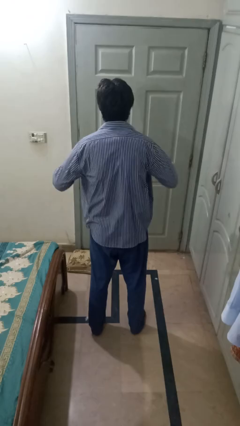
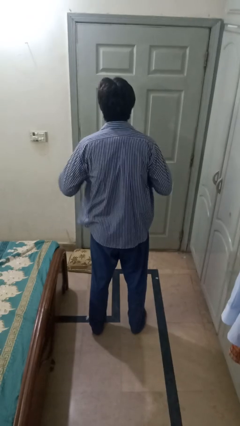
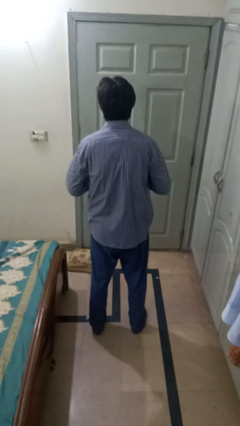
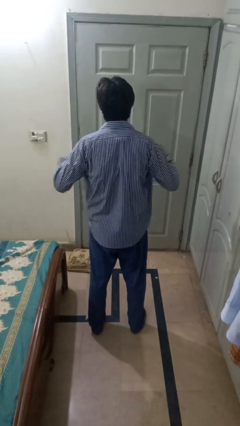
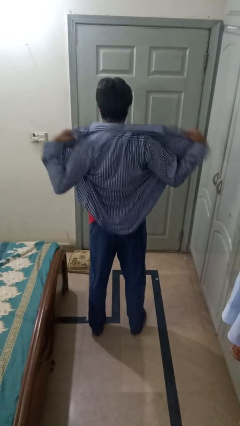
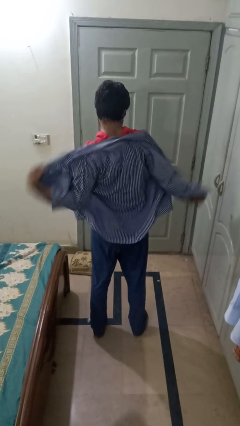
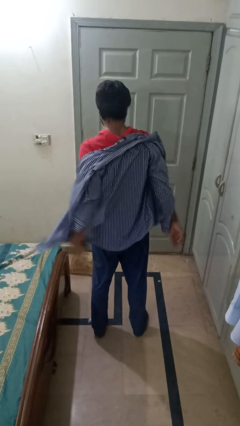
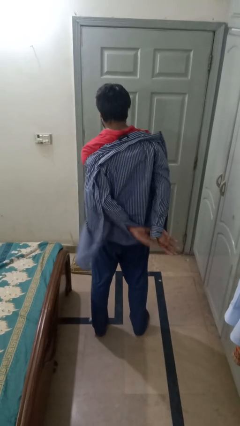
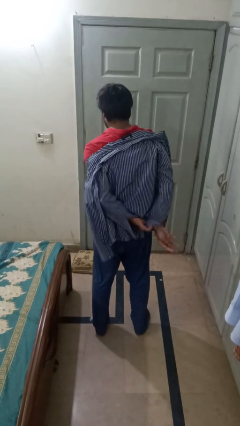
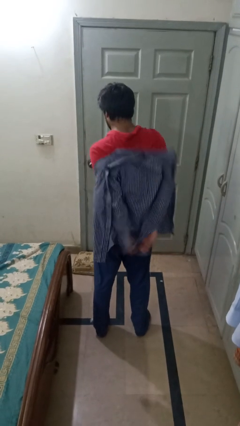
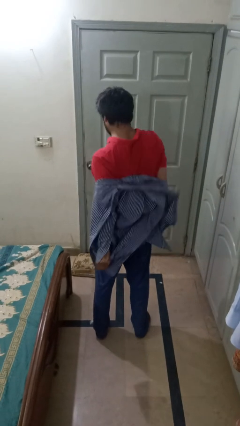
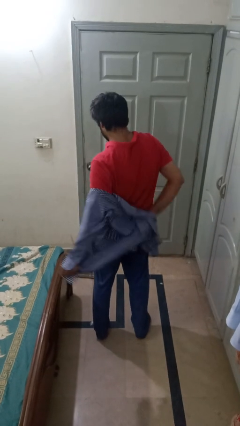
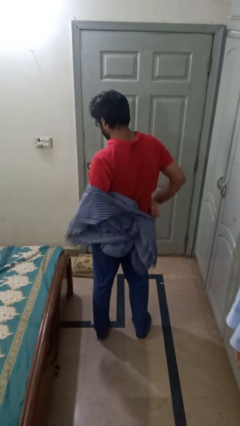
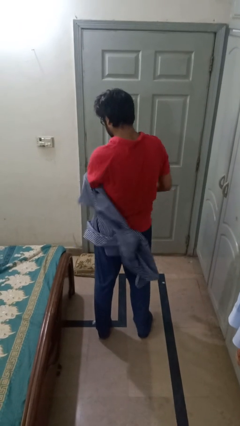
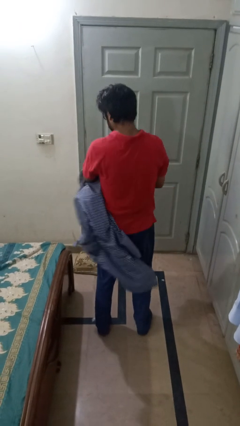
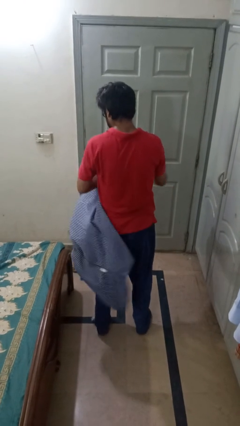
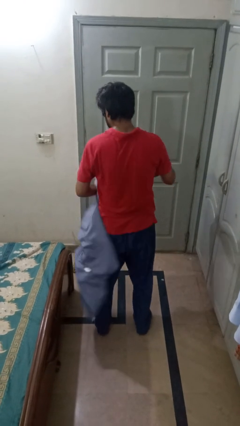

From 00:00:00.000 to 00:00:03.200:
person takes off shirt

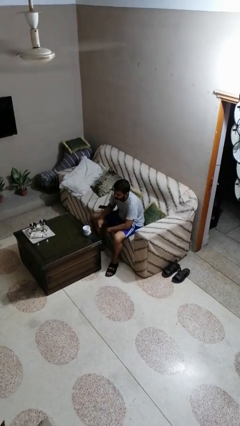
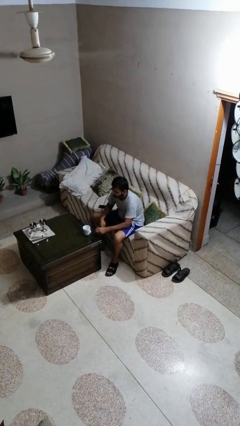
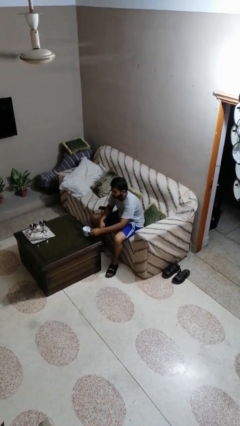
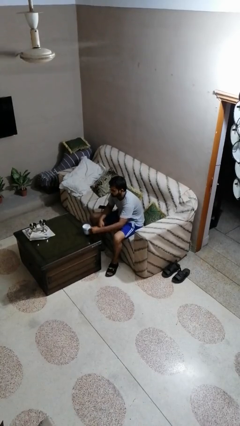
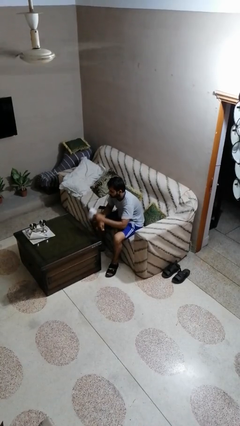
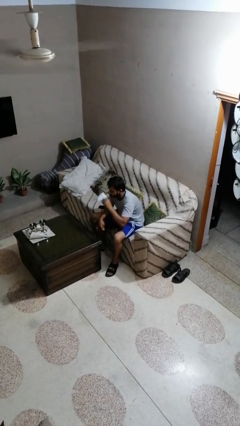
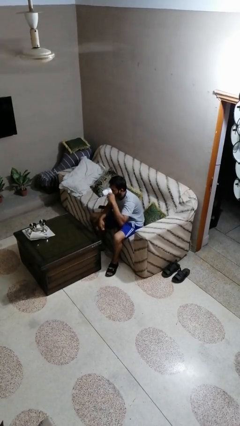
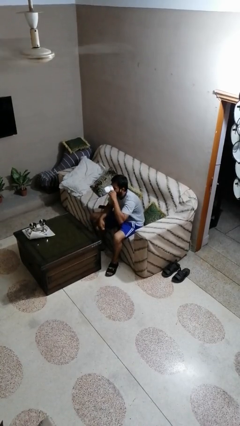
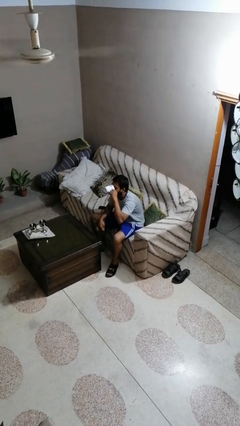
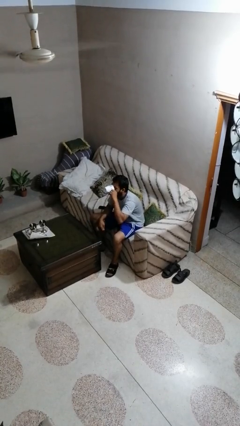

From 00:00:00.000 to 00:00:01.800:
person drinks from mug

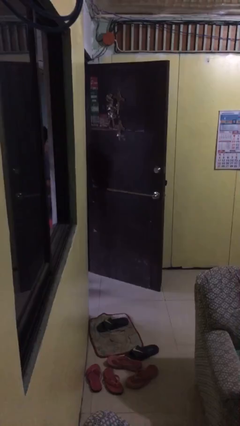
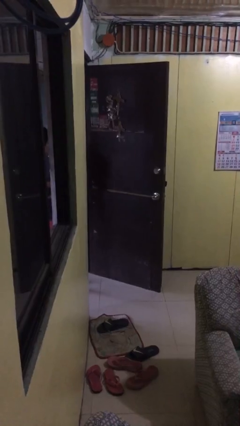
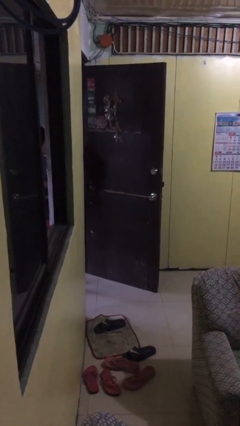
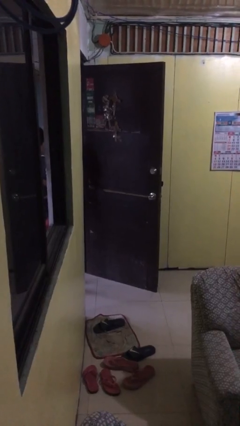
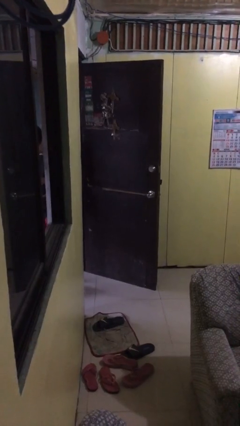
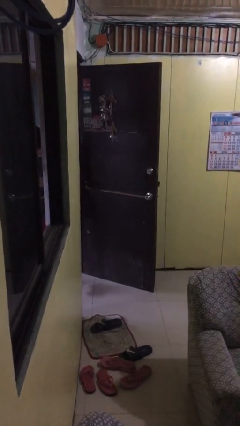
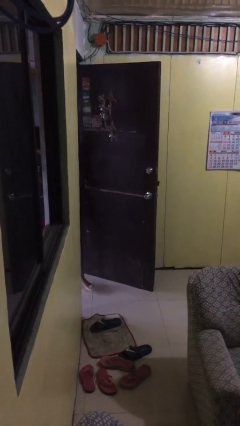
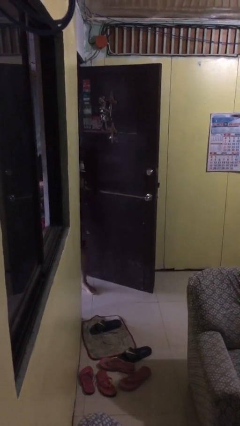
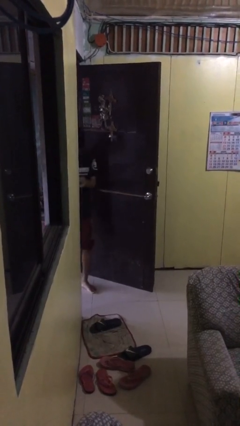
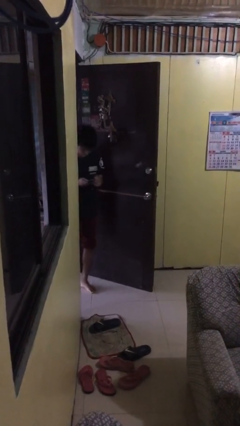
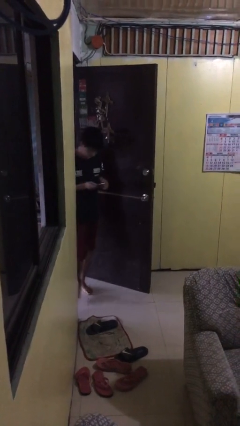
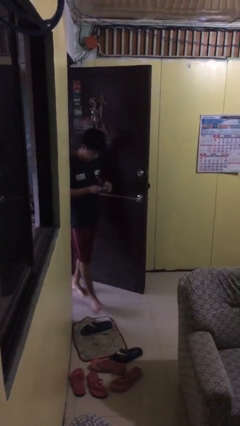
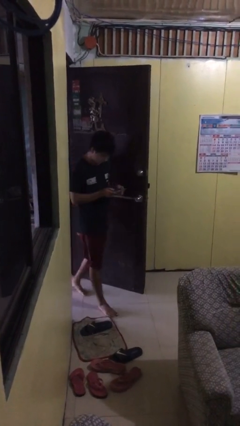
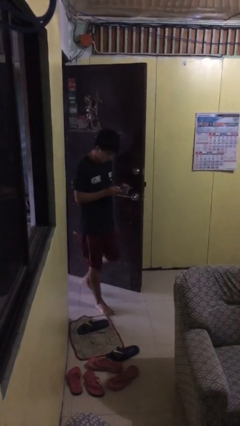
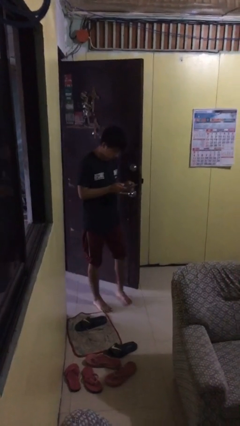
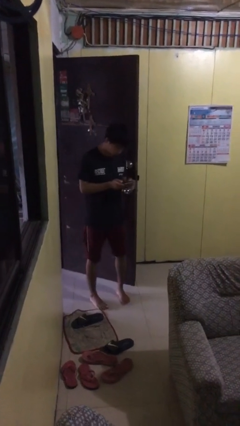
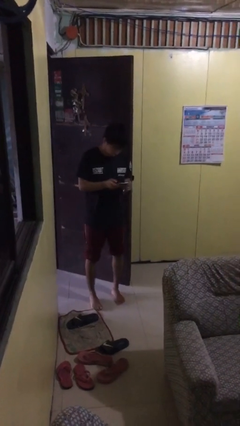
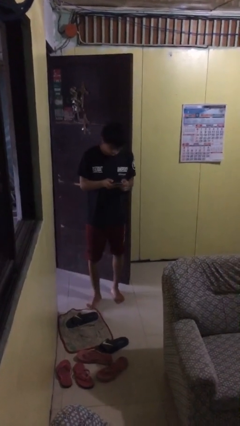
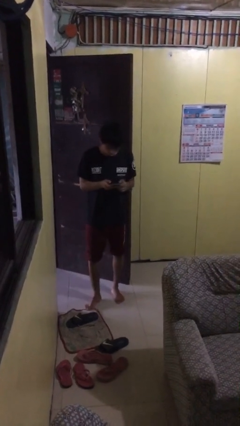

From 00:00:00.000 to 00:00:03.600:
person enters scene through structure

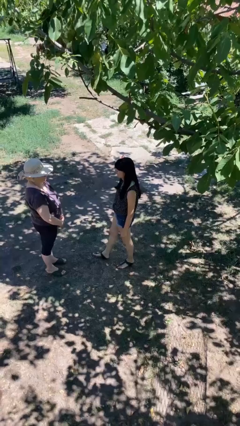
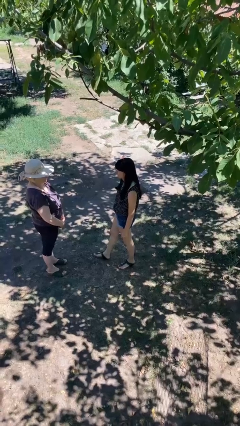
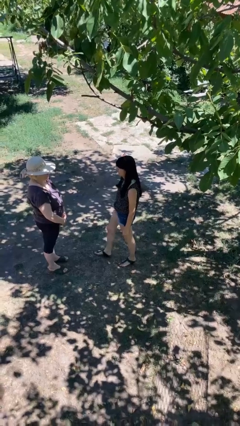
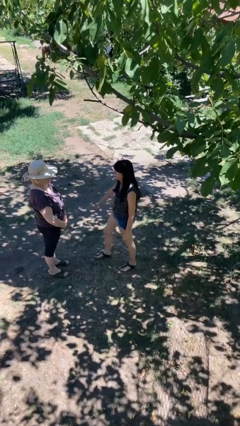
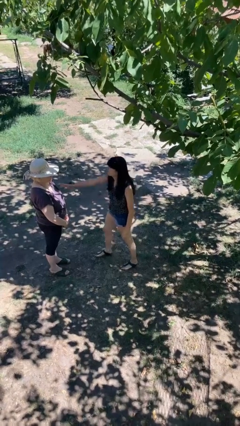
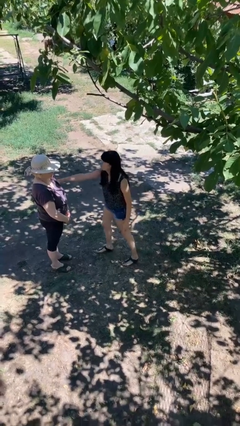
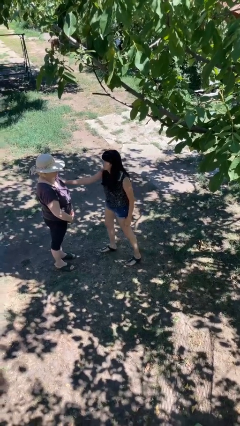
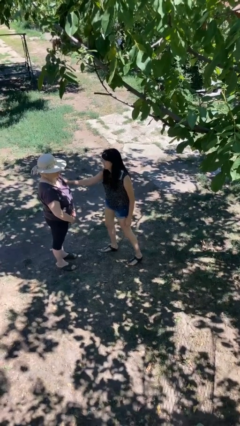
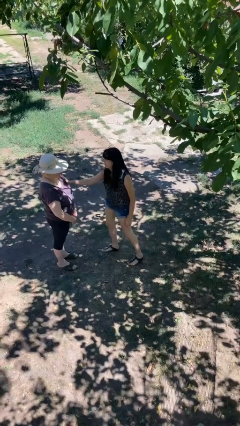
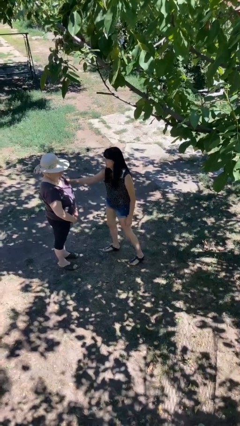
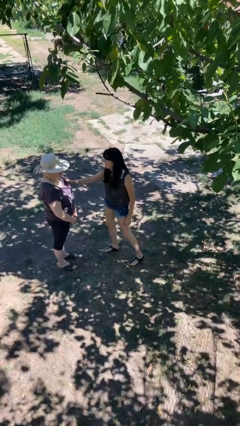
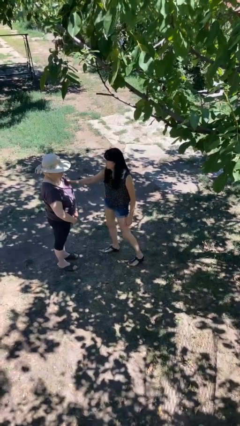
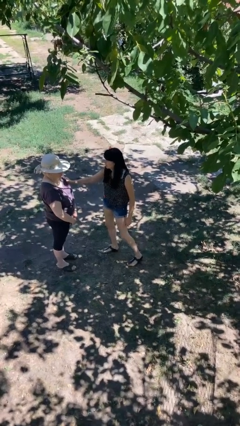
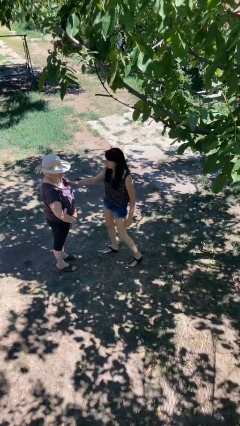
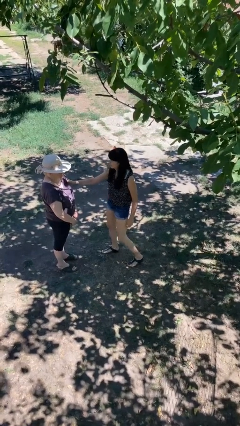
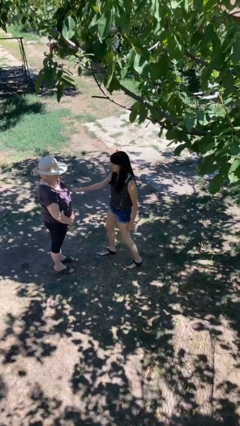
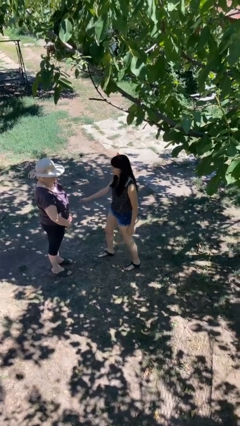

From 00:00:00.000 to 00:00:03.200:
person grabs person by bicep

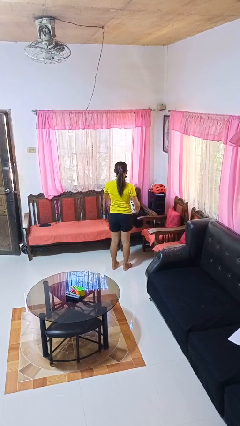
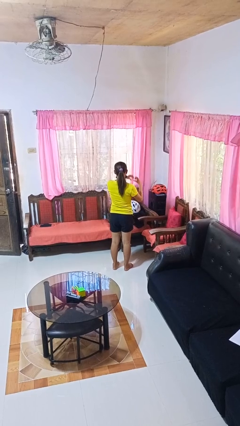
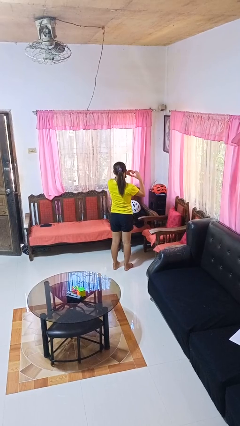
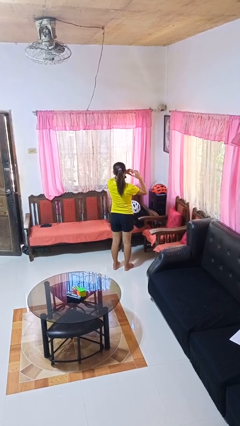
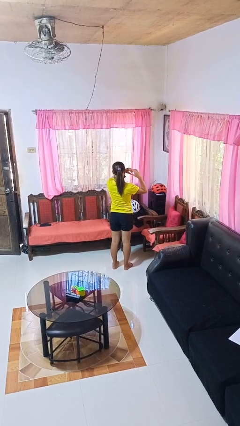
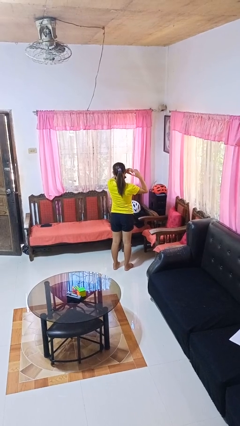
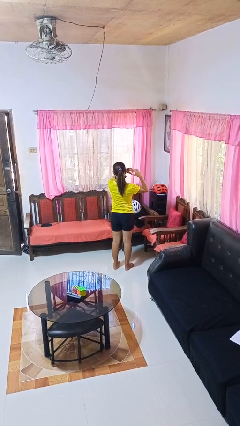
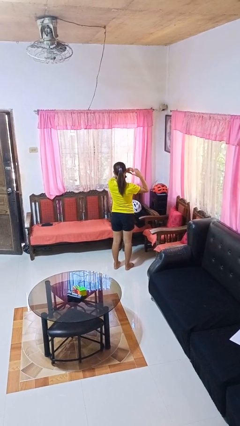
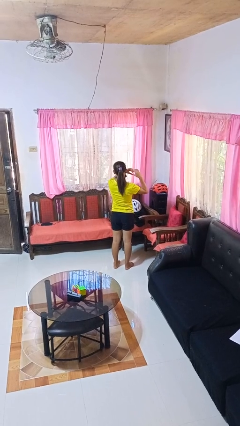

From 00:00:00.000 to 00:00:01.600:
person gestures heart

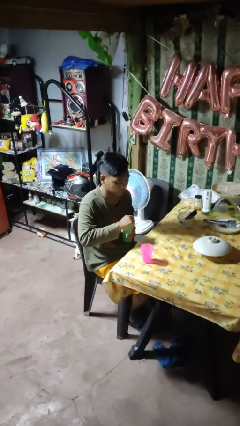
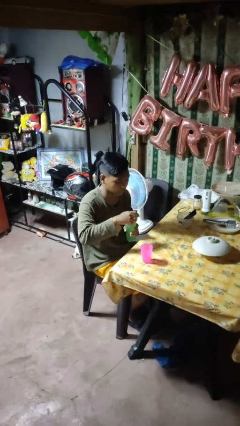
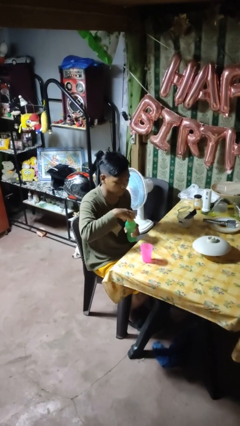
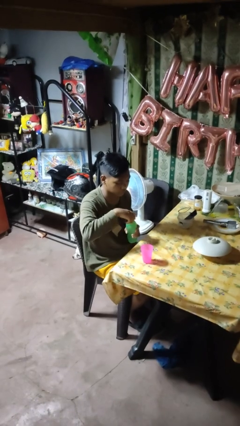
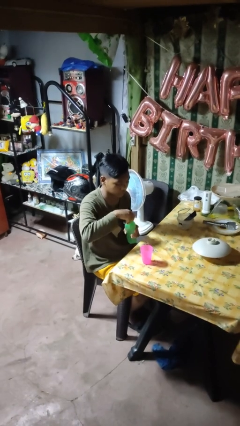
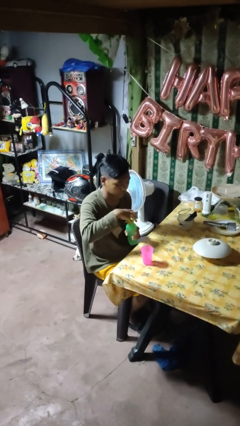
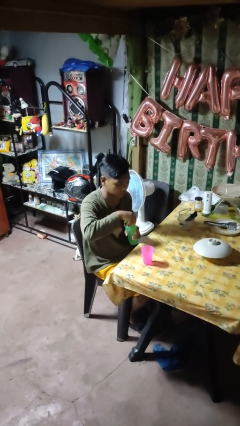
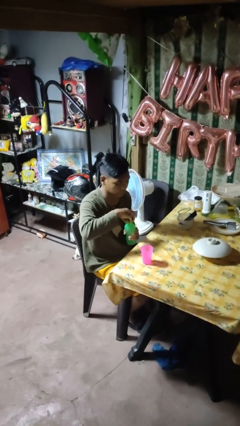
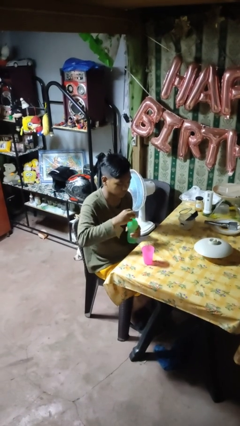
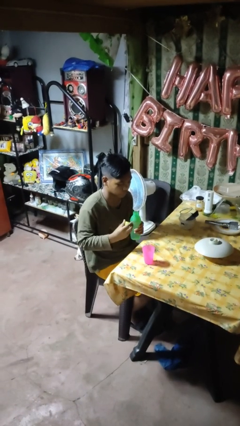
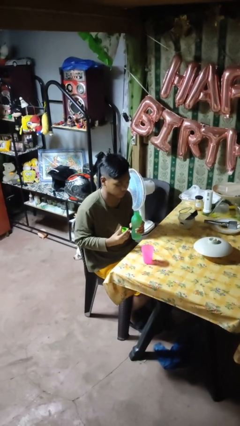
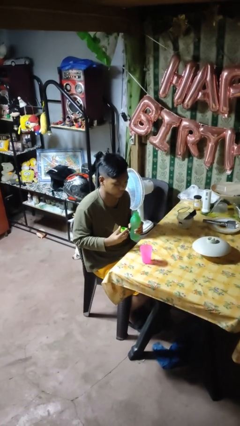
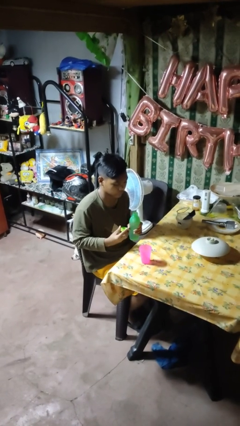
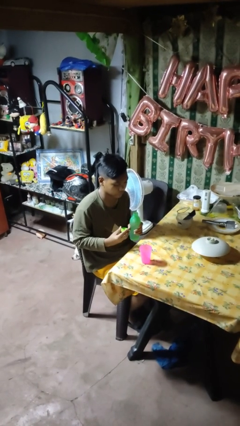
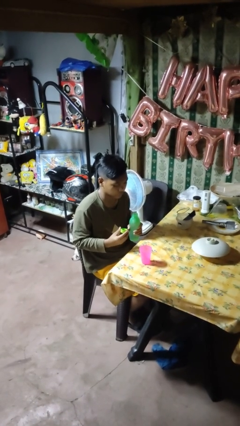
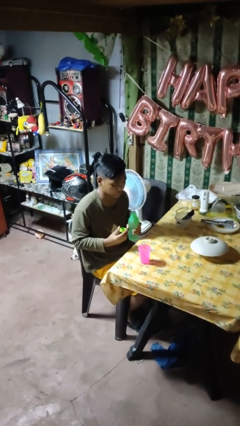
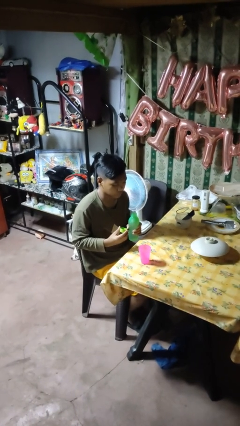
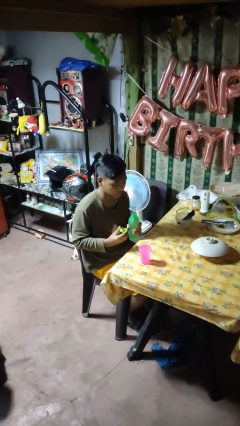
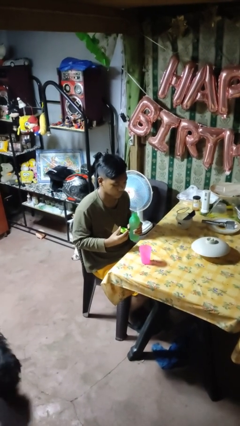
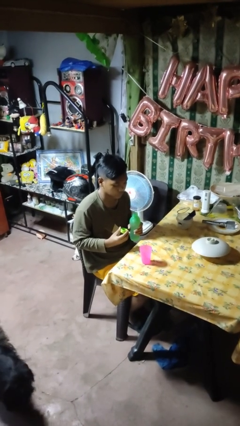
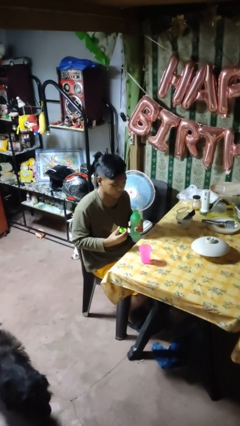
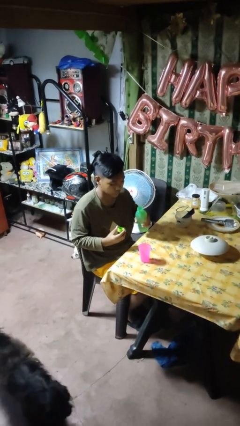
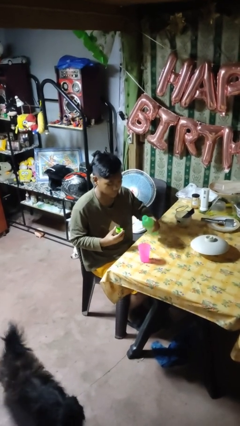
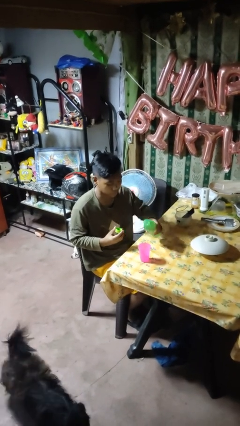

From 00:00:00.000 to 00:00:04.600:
person unscrews lid from bottle
